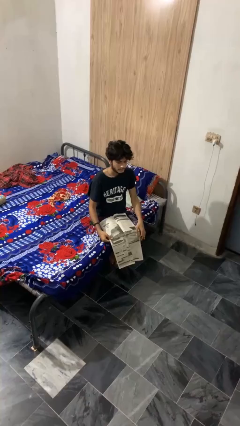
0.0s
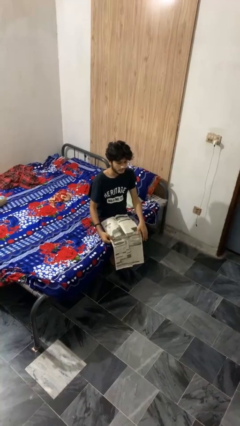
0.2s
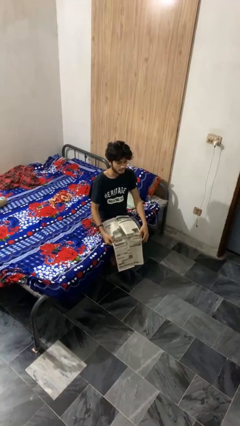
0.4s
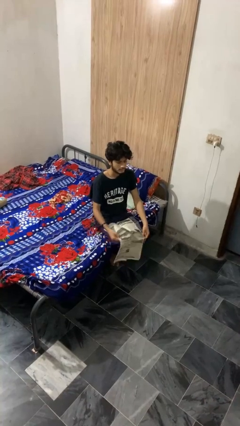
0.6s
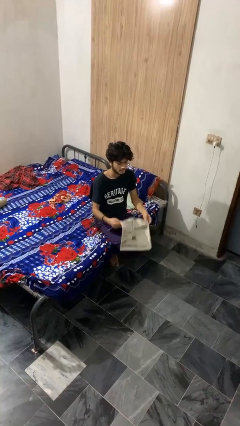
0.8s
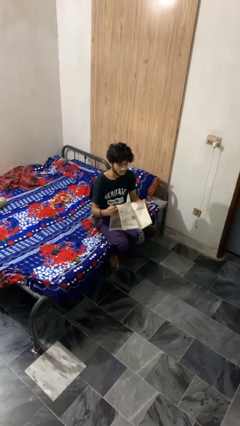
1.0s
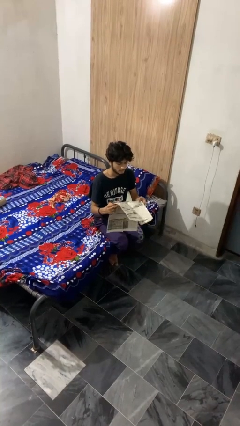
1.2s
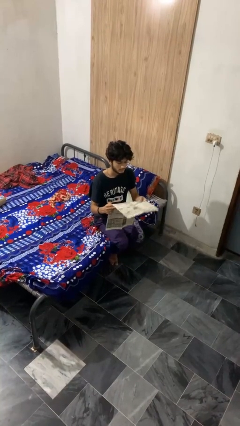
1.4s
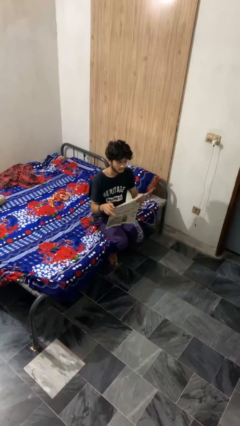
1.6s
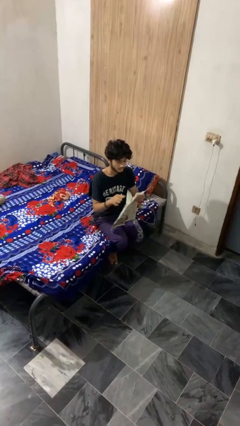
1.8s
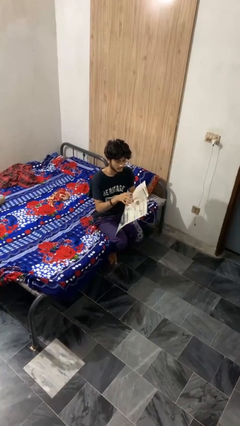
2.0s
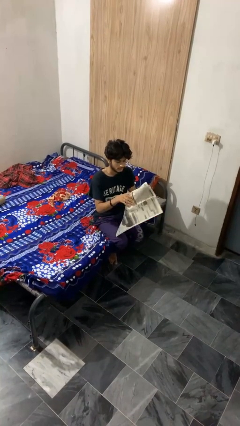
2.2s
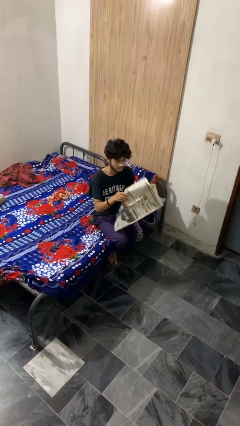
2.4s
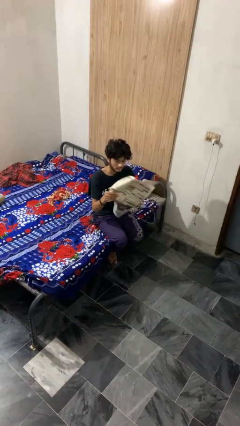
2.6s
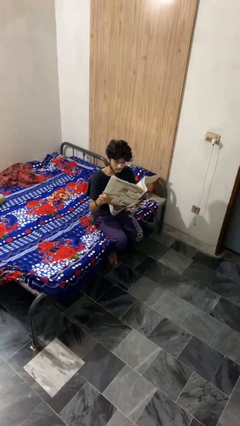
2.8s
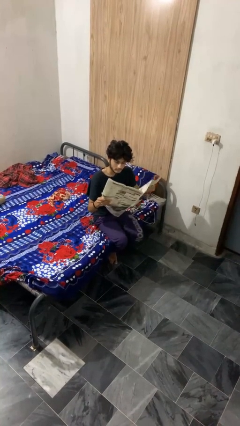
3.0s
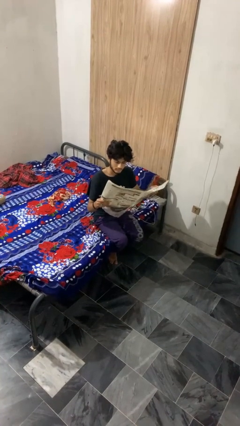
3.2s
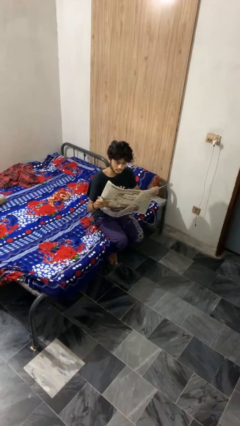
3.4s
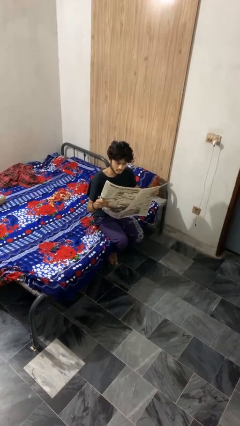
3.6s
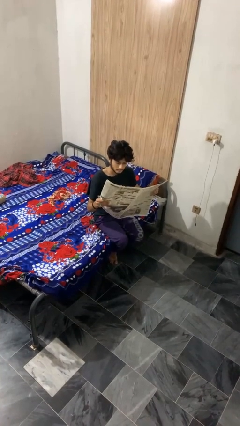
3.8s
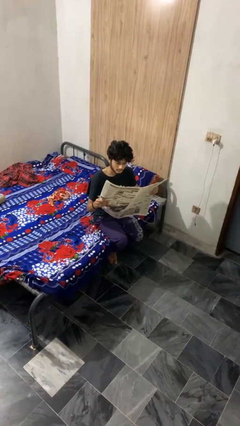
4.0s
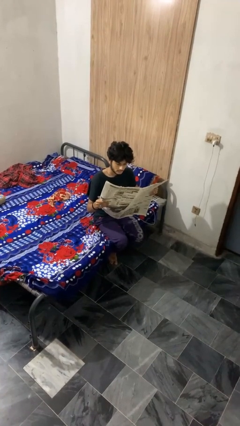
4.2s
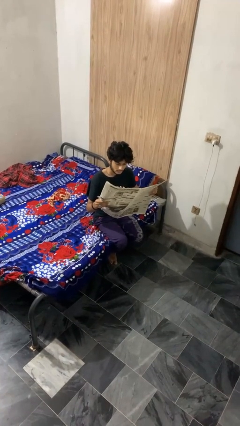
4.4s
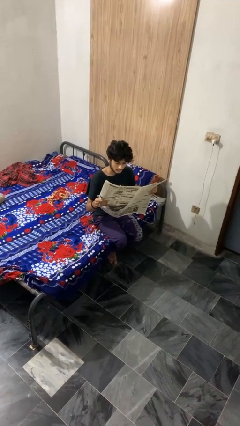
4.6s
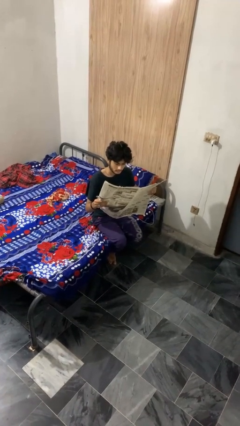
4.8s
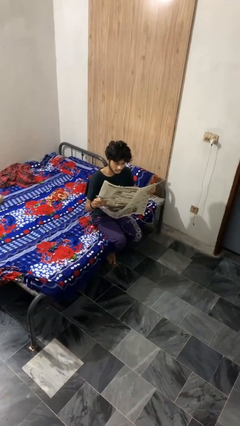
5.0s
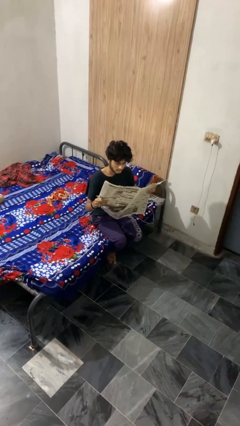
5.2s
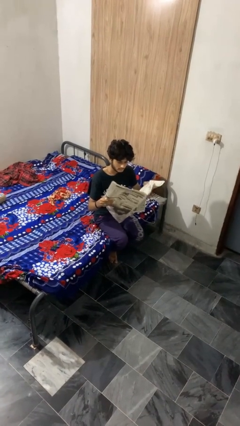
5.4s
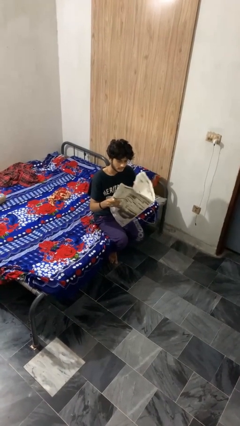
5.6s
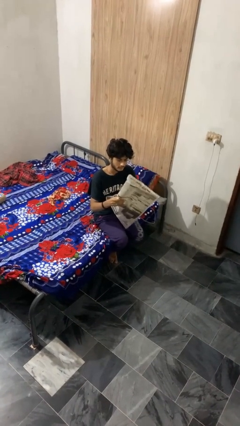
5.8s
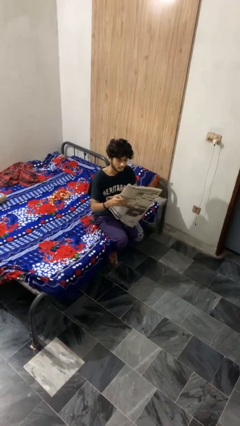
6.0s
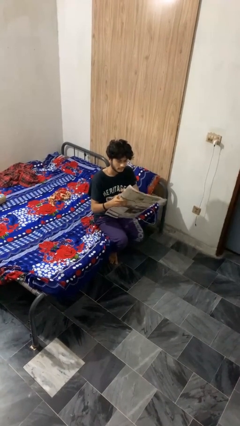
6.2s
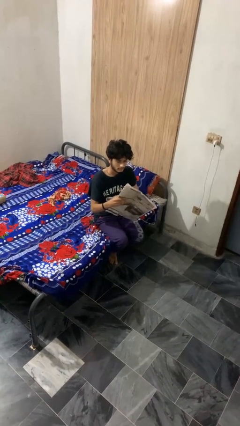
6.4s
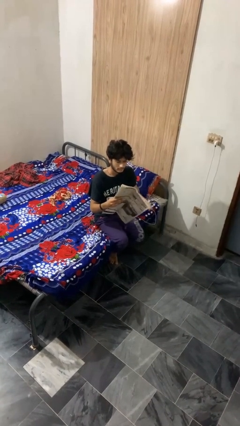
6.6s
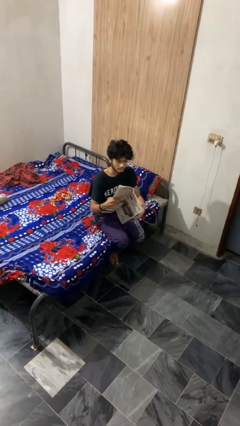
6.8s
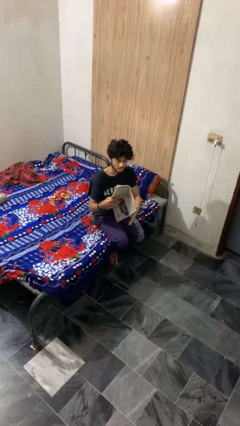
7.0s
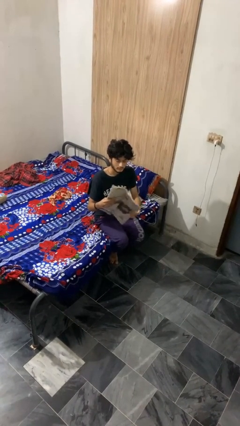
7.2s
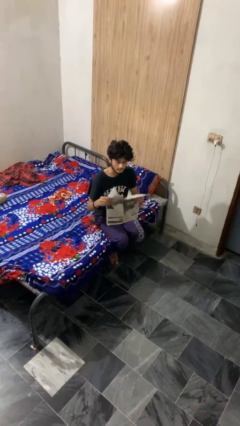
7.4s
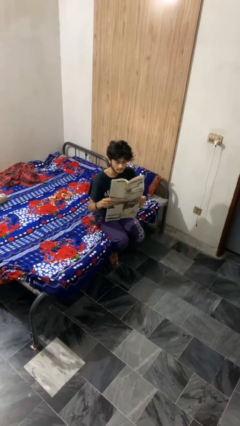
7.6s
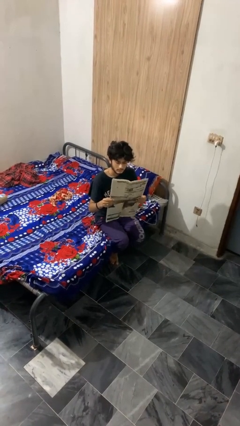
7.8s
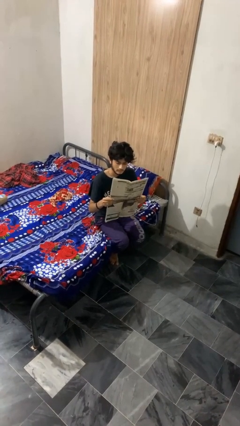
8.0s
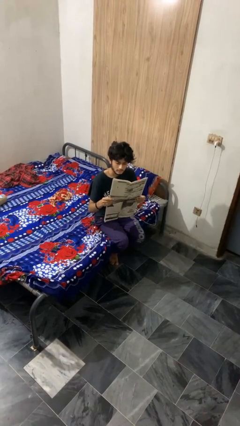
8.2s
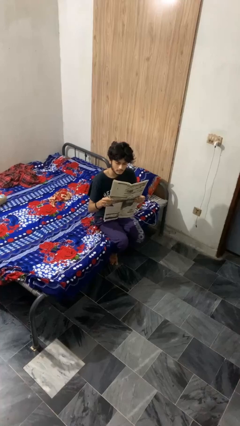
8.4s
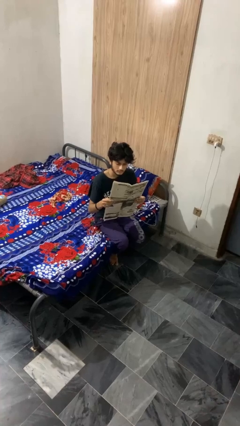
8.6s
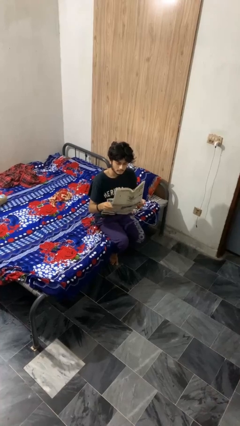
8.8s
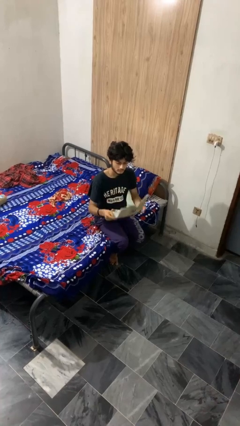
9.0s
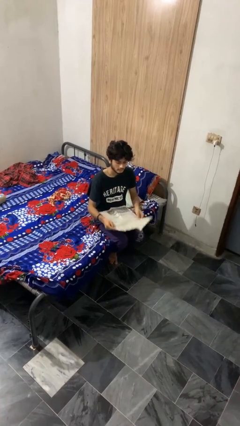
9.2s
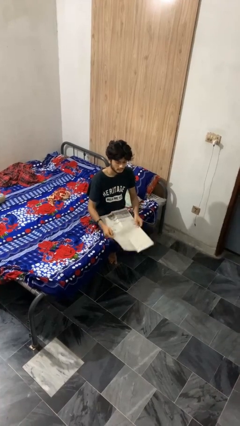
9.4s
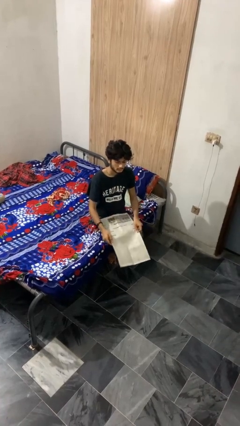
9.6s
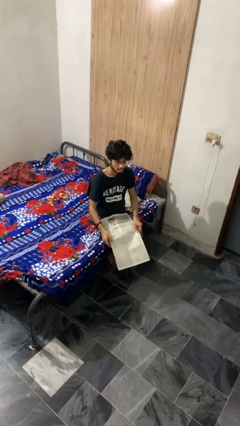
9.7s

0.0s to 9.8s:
person reads newspaper

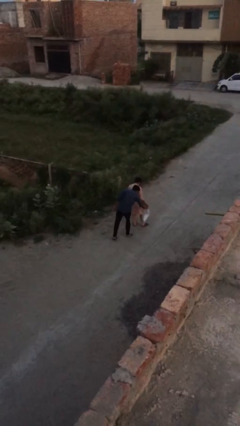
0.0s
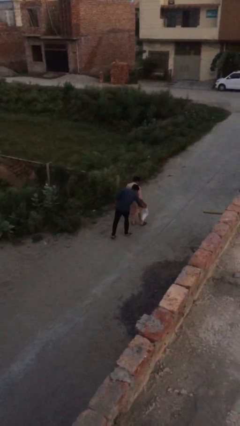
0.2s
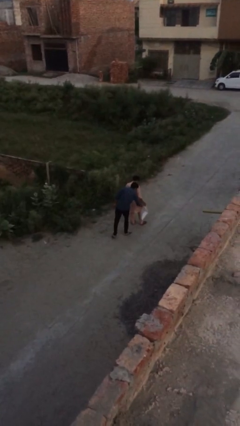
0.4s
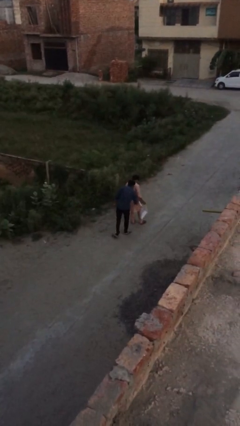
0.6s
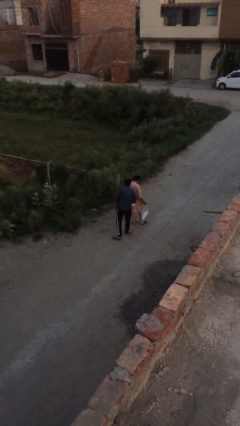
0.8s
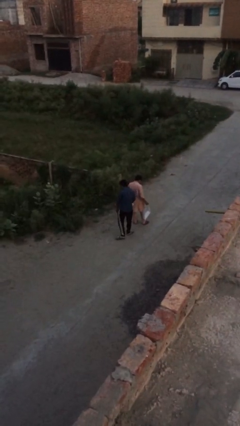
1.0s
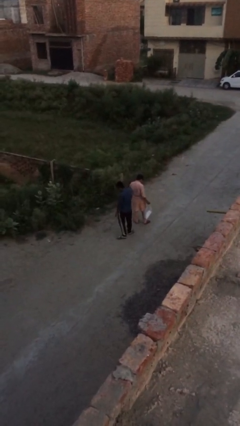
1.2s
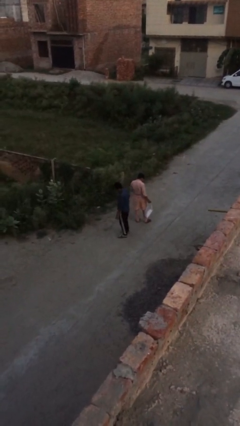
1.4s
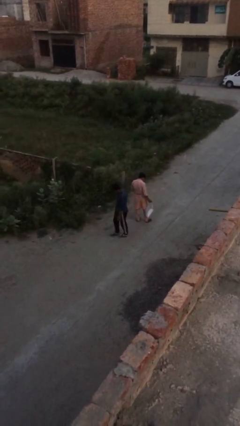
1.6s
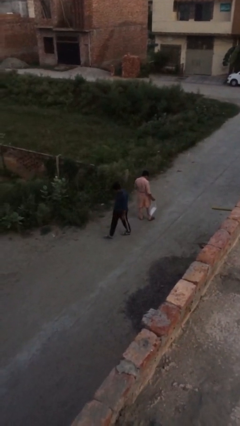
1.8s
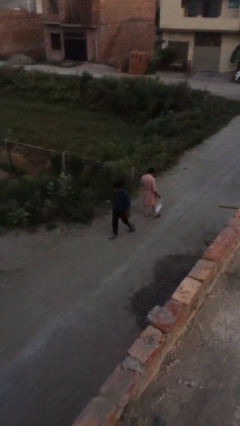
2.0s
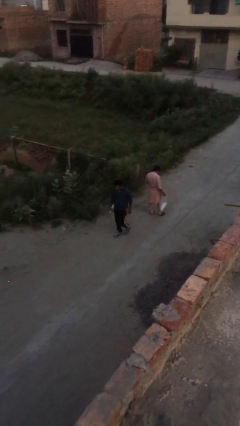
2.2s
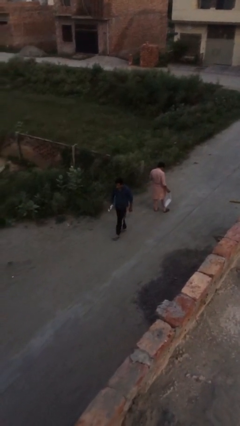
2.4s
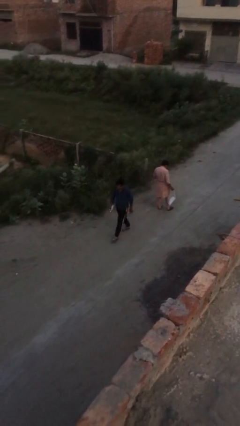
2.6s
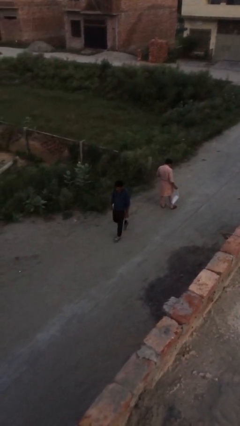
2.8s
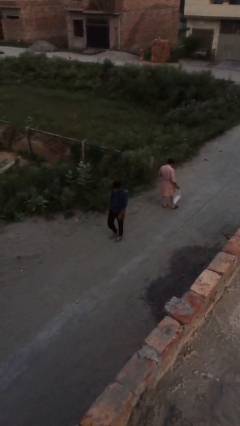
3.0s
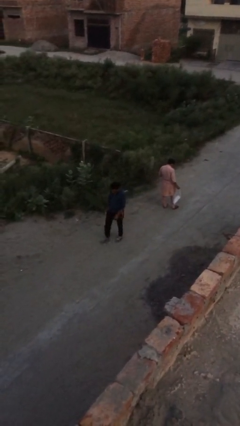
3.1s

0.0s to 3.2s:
person steals object from person

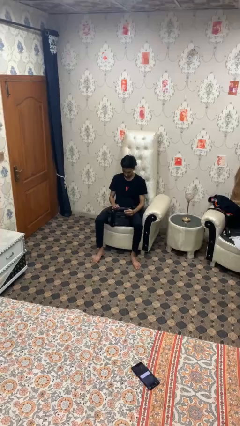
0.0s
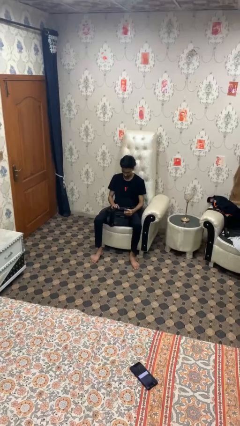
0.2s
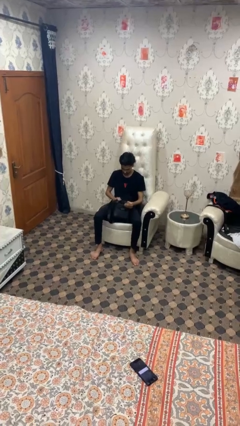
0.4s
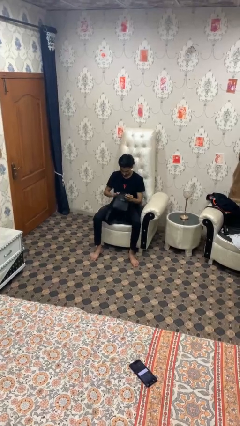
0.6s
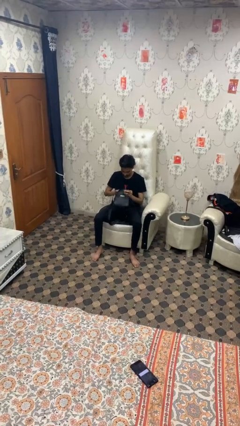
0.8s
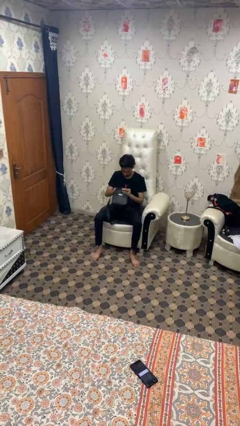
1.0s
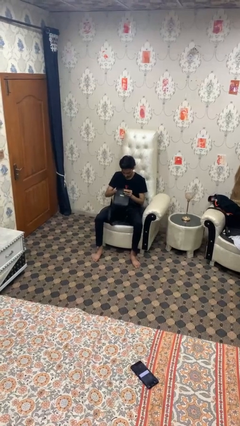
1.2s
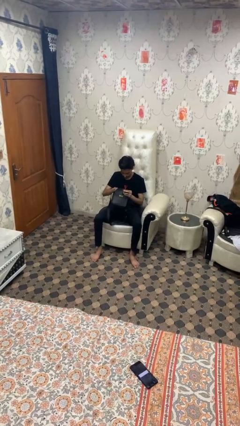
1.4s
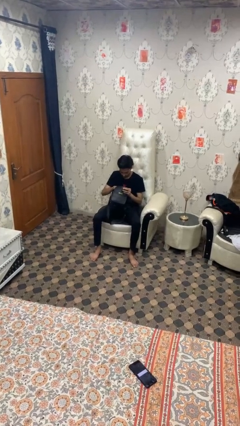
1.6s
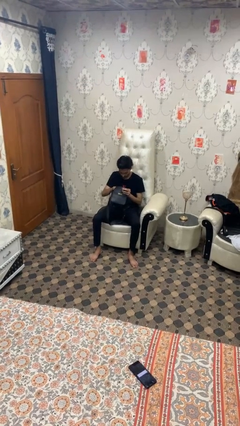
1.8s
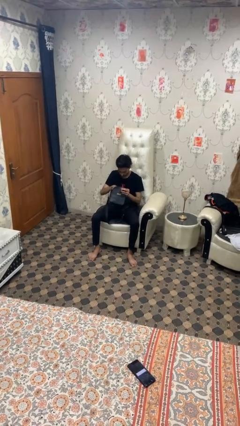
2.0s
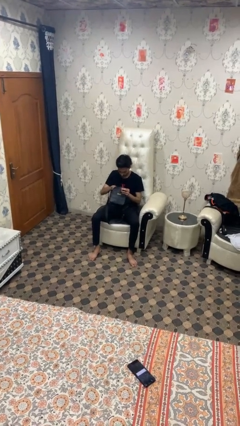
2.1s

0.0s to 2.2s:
person searches in bag

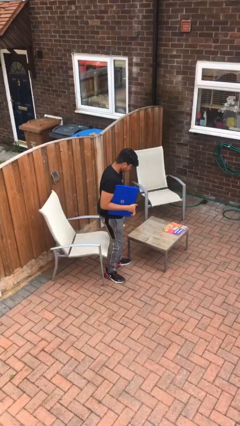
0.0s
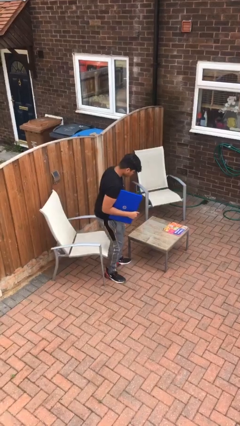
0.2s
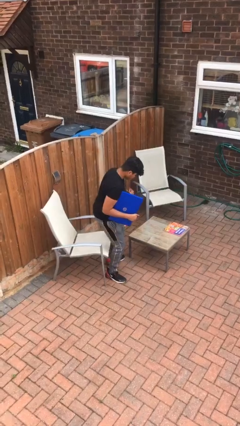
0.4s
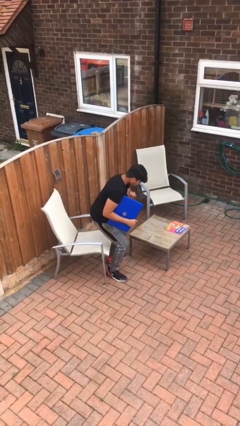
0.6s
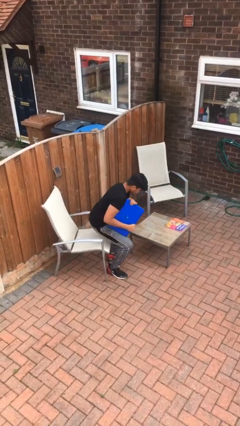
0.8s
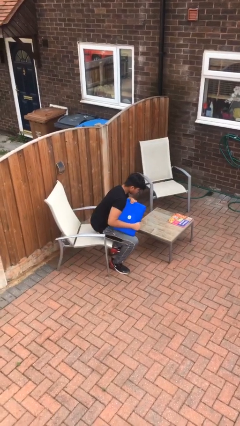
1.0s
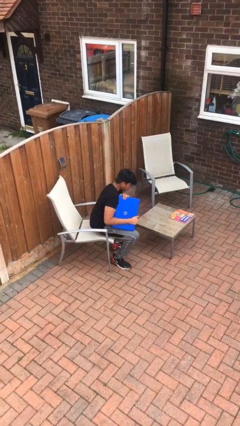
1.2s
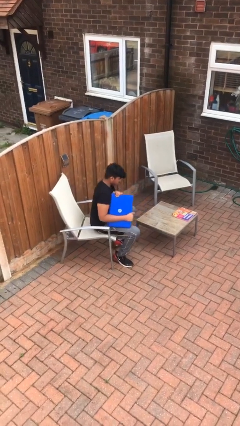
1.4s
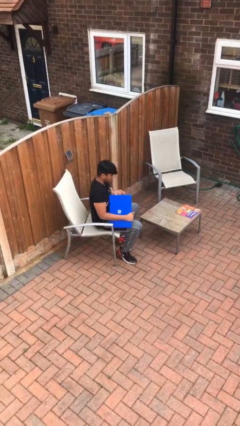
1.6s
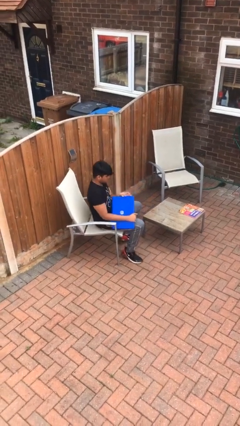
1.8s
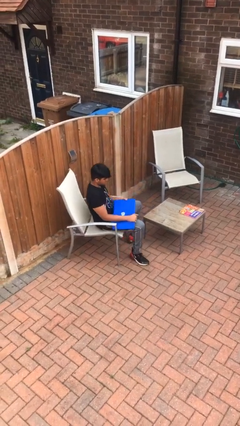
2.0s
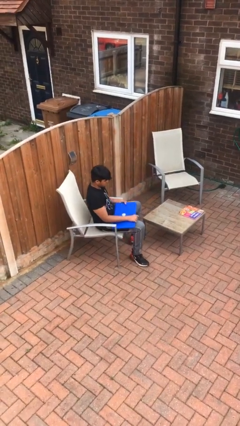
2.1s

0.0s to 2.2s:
person sits down

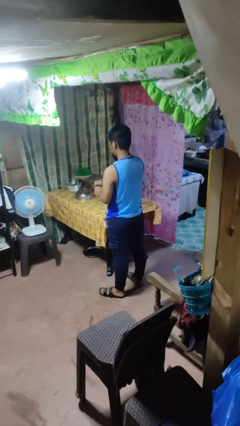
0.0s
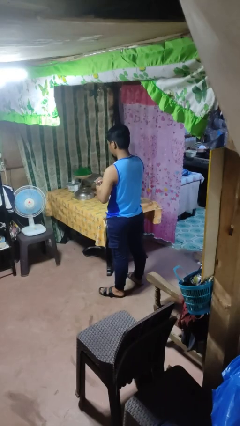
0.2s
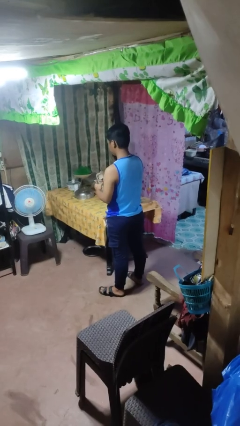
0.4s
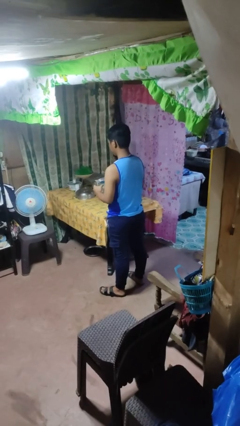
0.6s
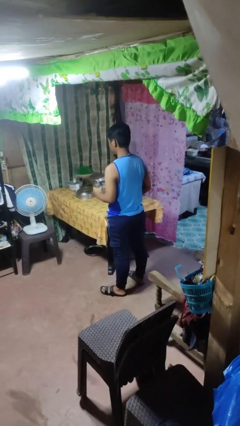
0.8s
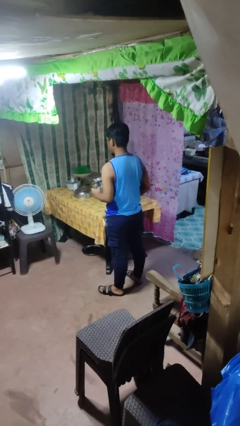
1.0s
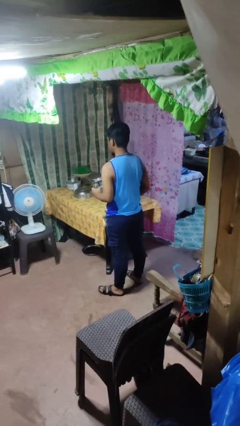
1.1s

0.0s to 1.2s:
person opens jar
